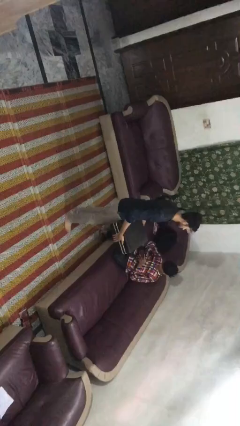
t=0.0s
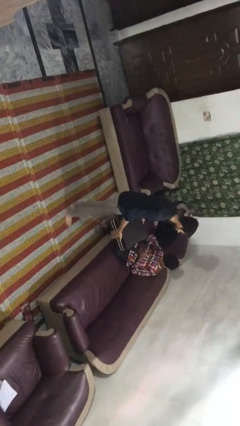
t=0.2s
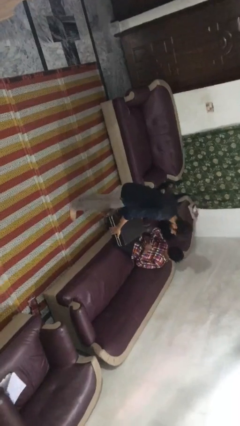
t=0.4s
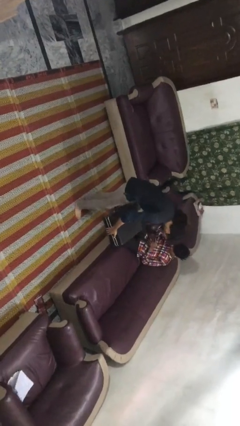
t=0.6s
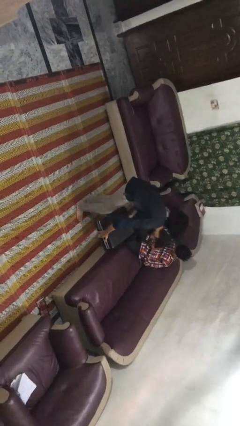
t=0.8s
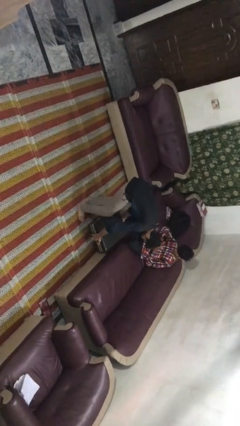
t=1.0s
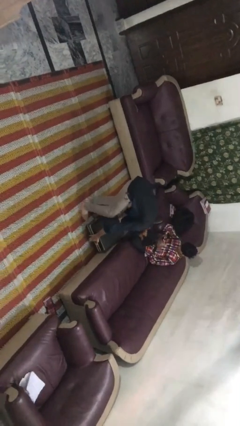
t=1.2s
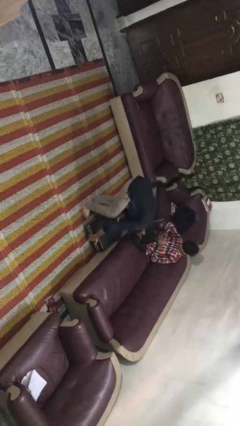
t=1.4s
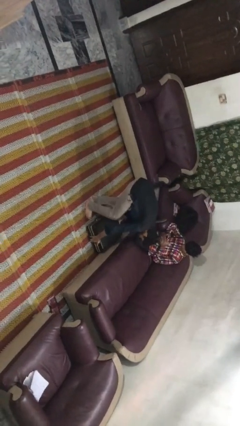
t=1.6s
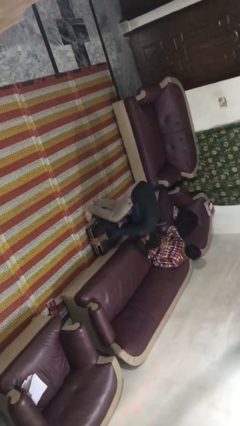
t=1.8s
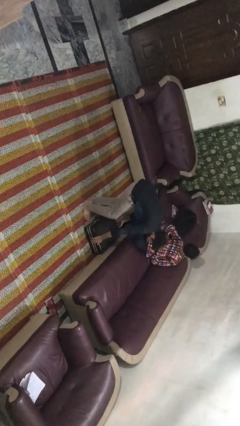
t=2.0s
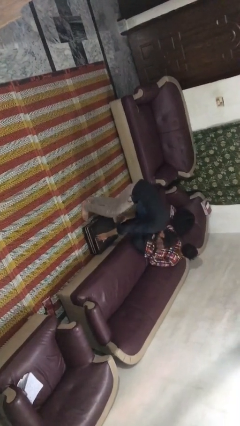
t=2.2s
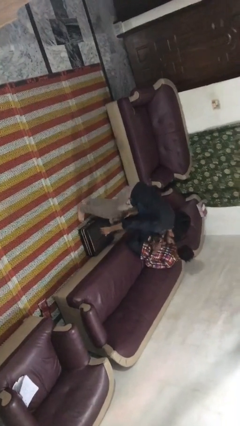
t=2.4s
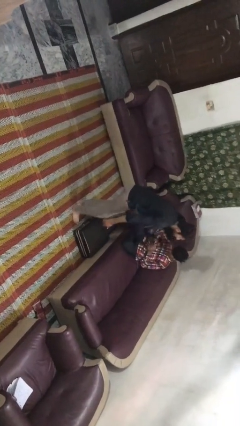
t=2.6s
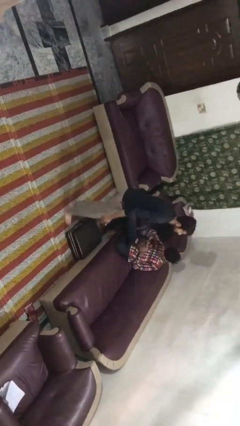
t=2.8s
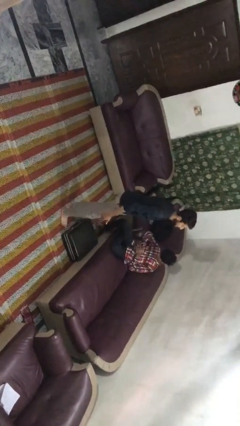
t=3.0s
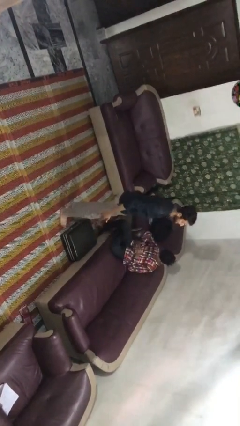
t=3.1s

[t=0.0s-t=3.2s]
person puts down object on floor

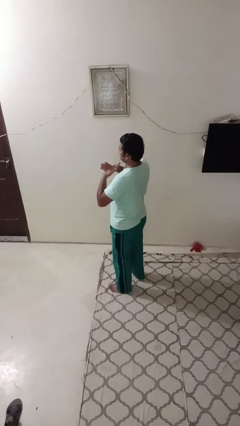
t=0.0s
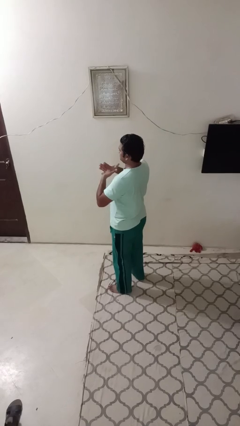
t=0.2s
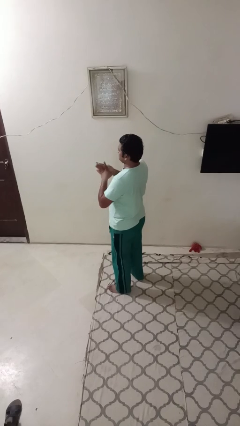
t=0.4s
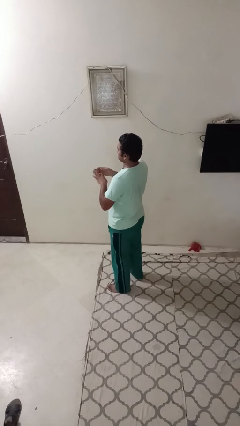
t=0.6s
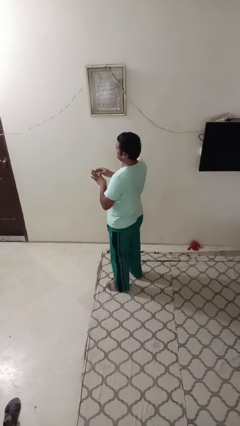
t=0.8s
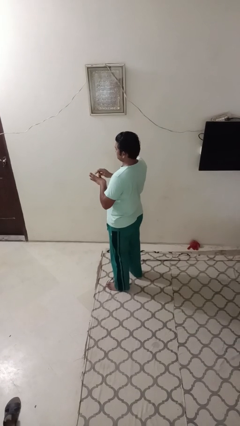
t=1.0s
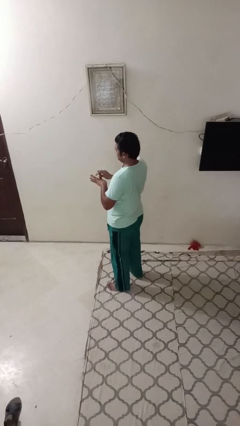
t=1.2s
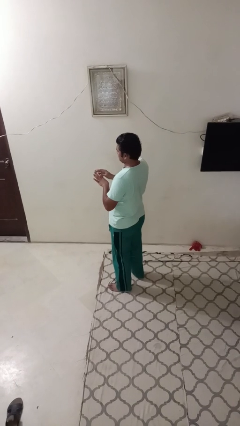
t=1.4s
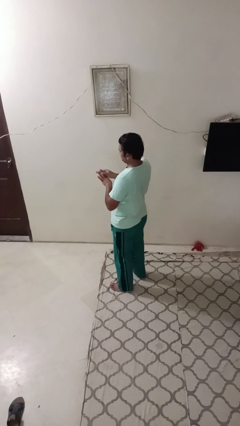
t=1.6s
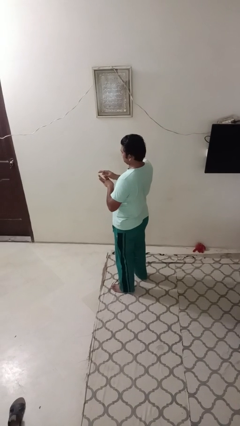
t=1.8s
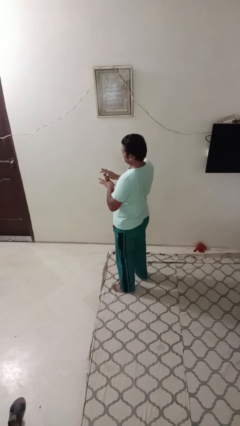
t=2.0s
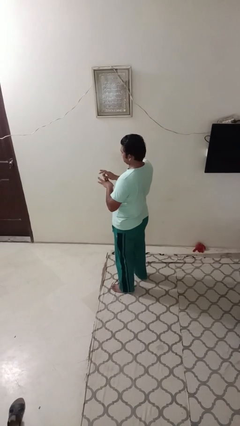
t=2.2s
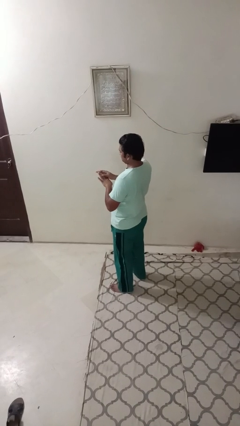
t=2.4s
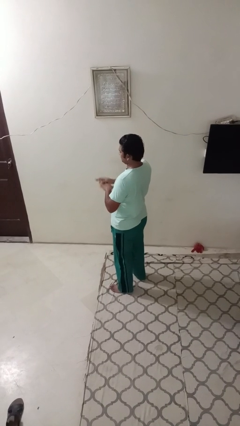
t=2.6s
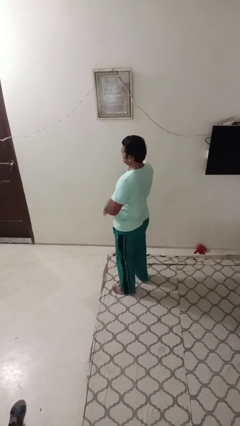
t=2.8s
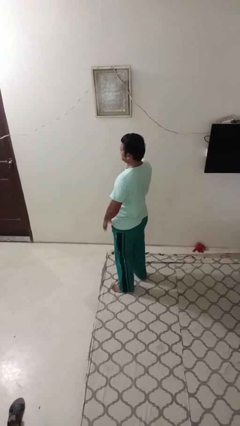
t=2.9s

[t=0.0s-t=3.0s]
person cracks knuckles

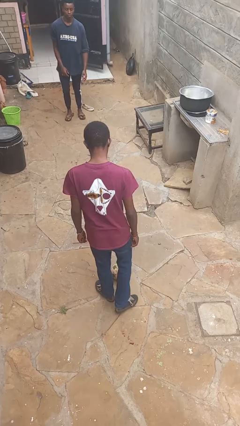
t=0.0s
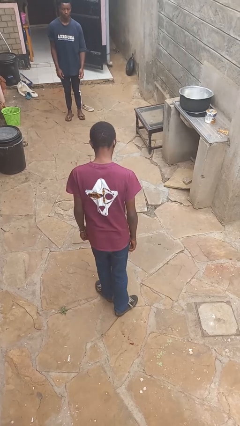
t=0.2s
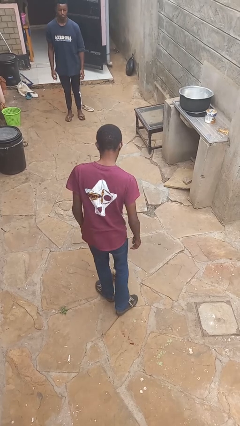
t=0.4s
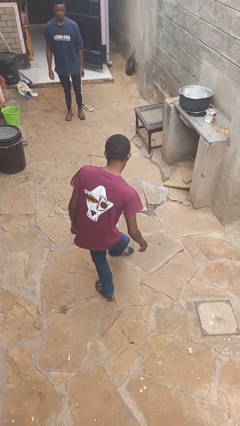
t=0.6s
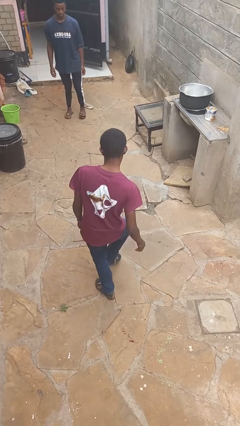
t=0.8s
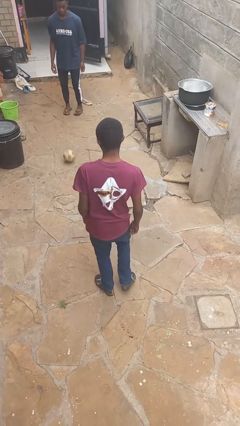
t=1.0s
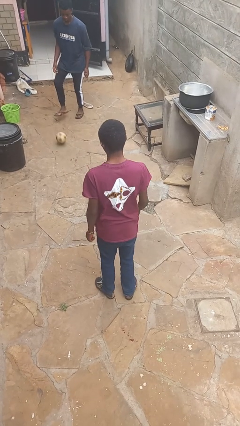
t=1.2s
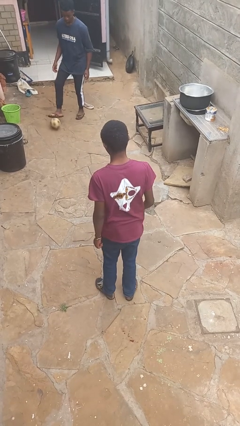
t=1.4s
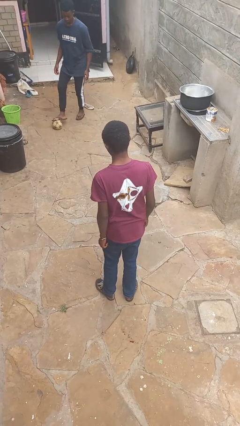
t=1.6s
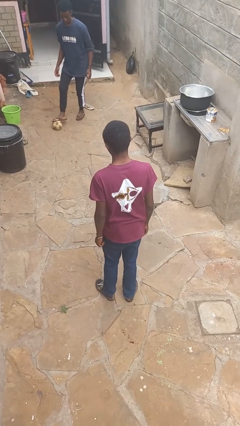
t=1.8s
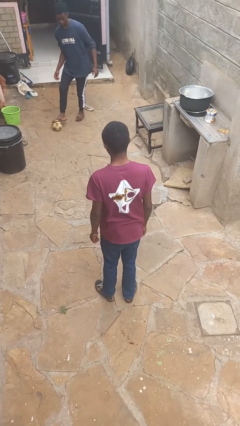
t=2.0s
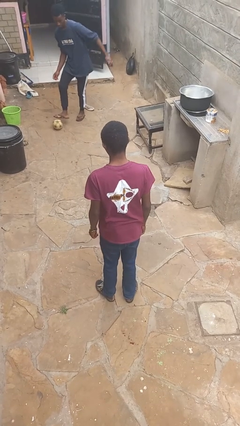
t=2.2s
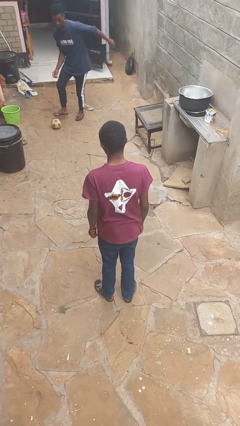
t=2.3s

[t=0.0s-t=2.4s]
person kicks object to person

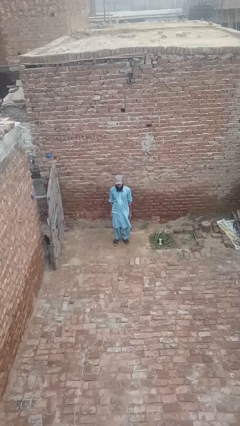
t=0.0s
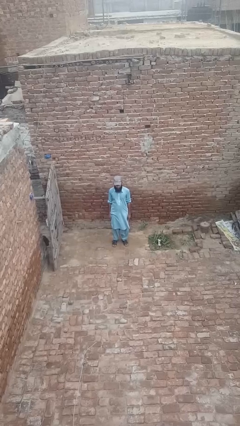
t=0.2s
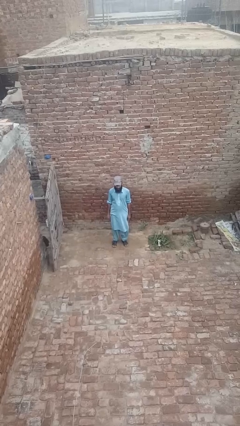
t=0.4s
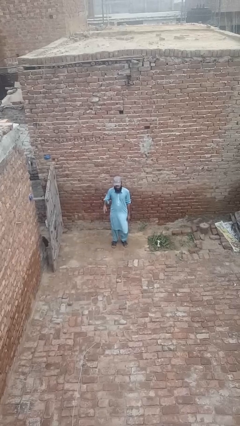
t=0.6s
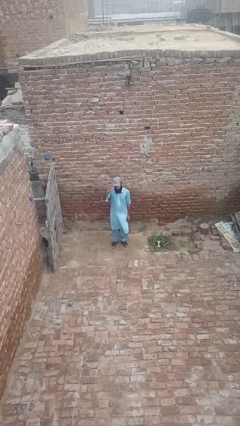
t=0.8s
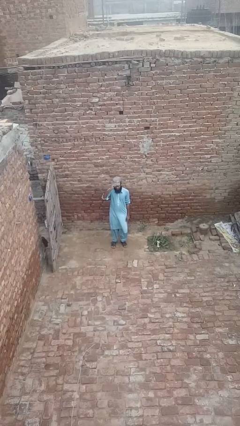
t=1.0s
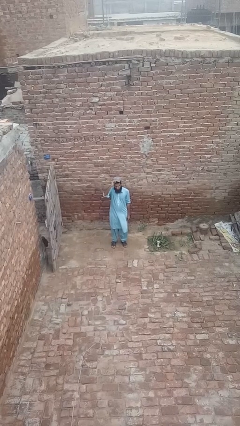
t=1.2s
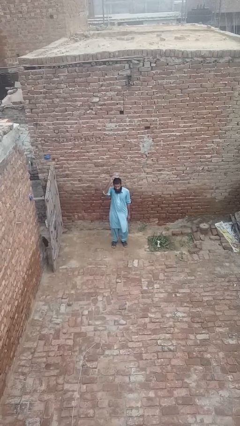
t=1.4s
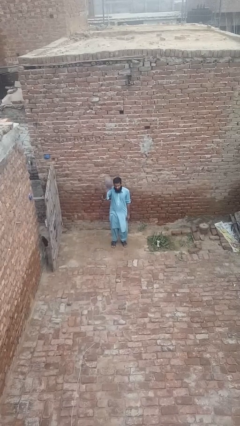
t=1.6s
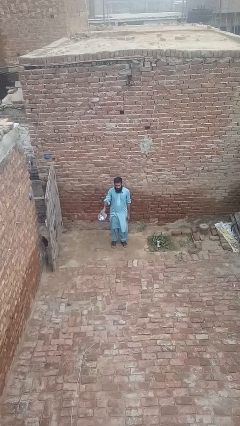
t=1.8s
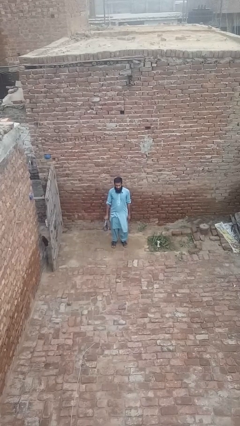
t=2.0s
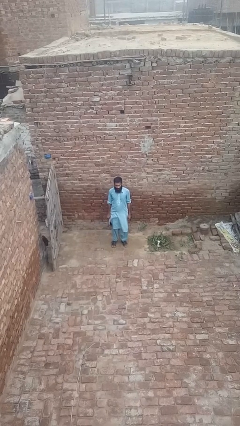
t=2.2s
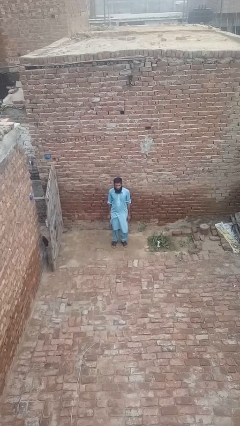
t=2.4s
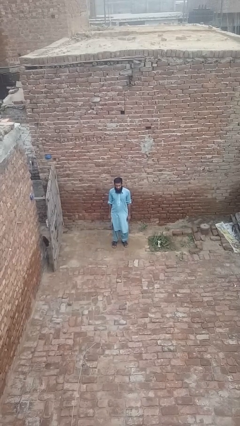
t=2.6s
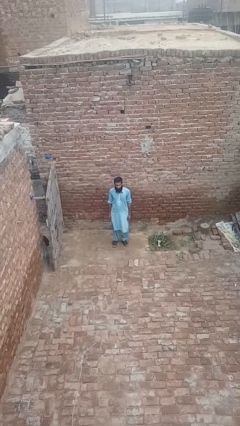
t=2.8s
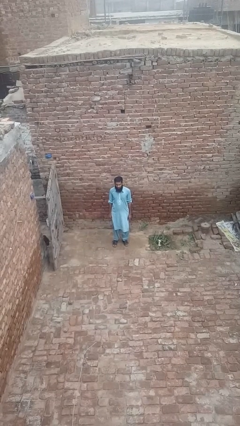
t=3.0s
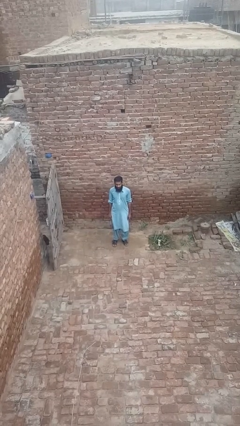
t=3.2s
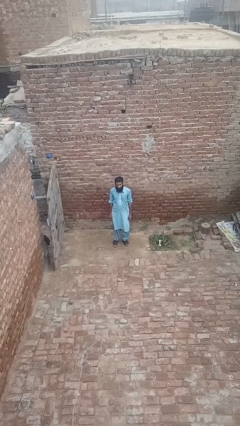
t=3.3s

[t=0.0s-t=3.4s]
person takes off hat

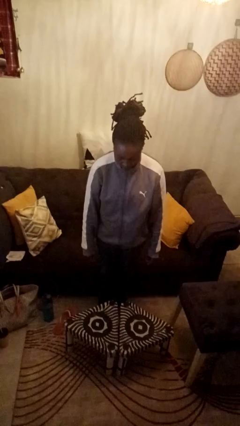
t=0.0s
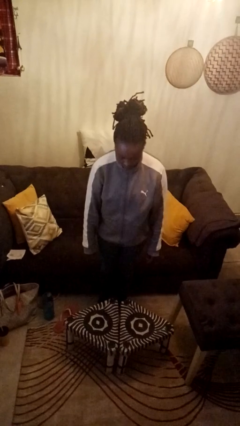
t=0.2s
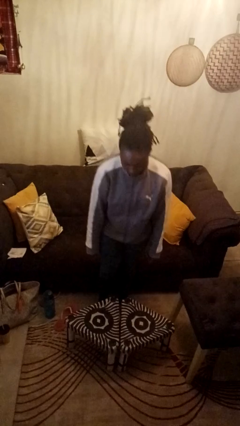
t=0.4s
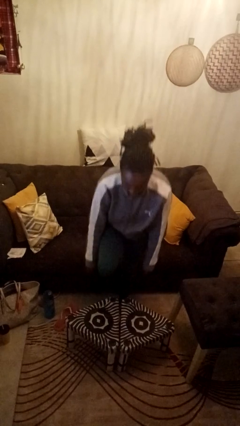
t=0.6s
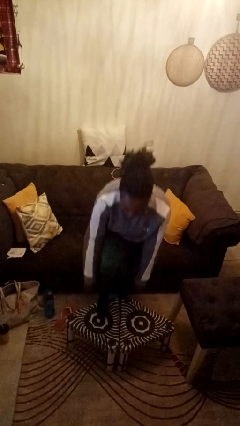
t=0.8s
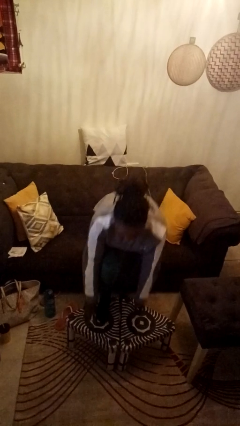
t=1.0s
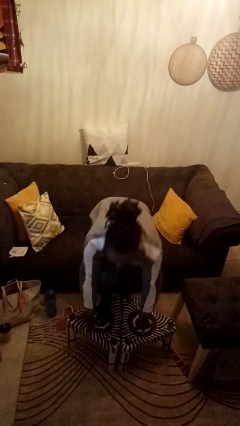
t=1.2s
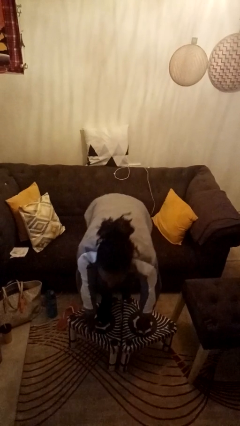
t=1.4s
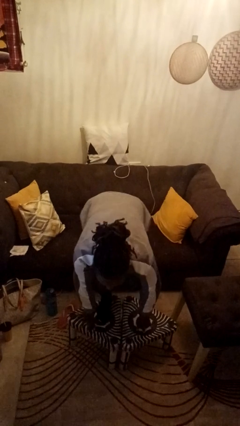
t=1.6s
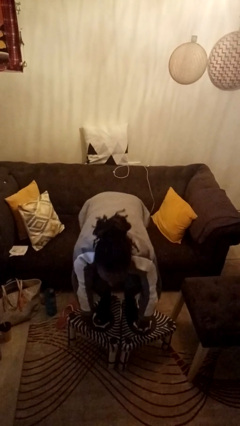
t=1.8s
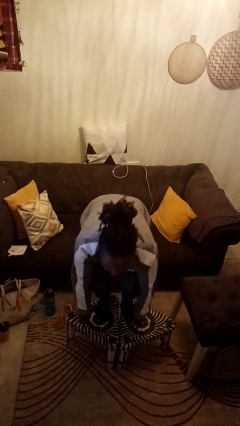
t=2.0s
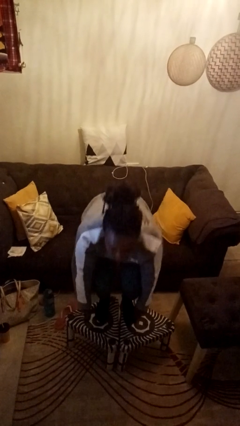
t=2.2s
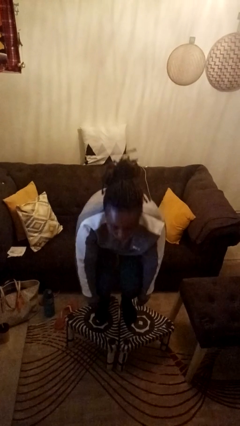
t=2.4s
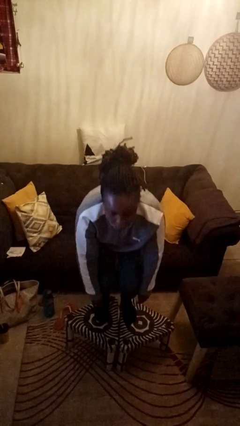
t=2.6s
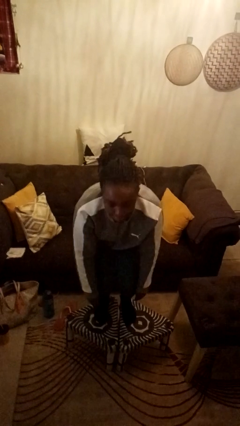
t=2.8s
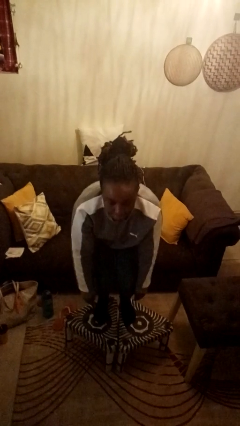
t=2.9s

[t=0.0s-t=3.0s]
person climbs on table

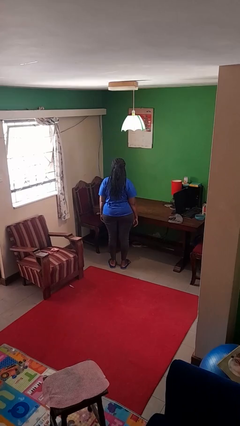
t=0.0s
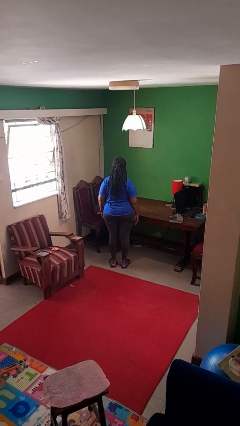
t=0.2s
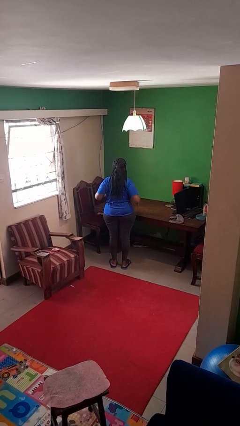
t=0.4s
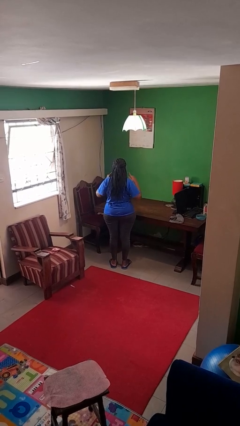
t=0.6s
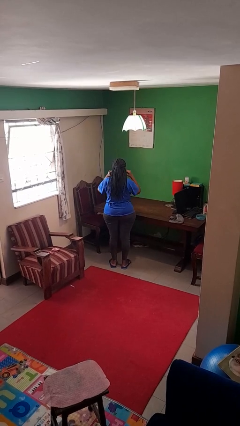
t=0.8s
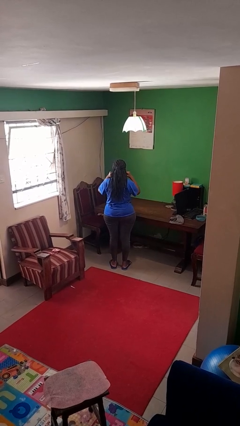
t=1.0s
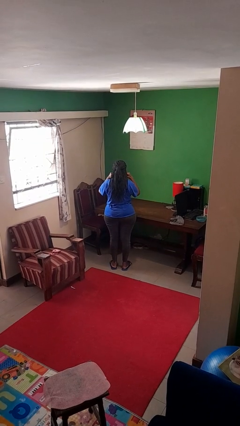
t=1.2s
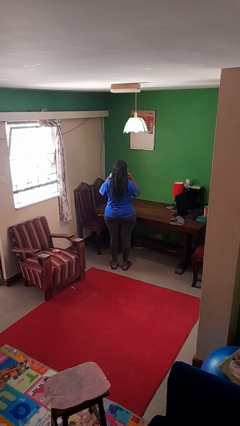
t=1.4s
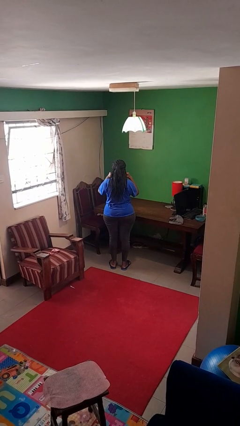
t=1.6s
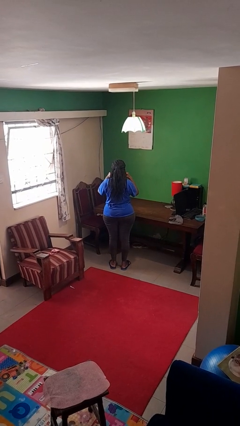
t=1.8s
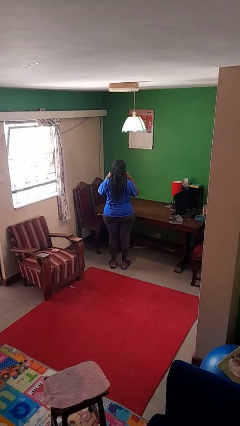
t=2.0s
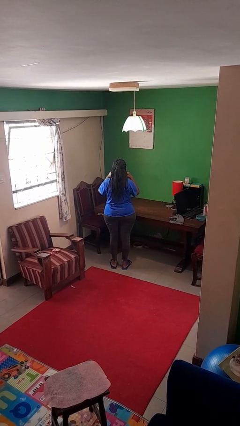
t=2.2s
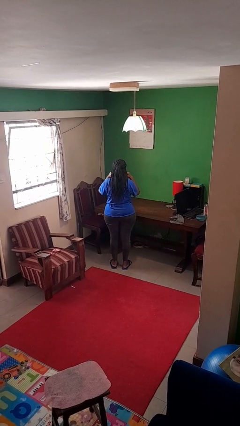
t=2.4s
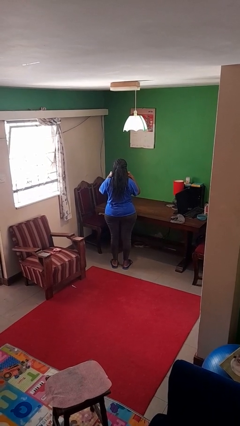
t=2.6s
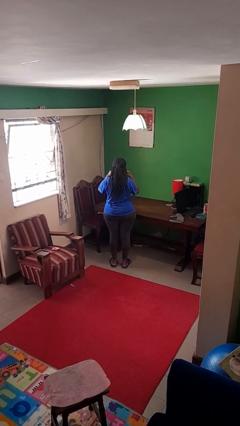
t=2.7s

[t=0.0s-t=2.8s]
person puts fingers in ear
